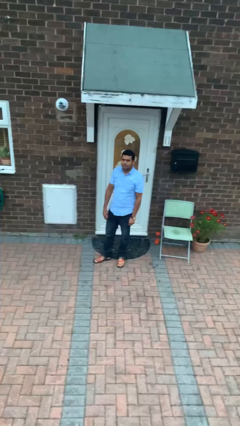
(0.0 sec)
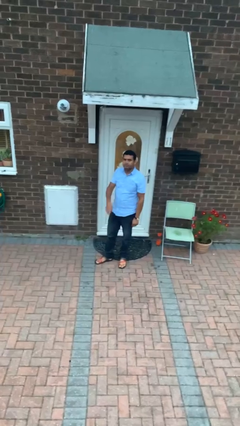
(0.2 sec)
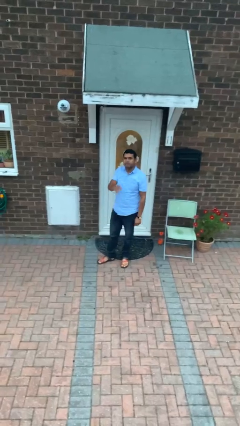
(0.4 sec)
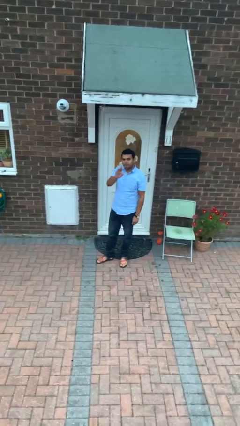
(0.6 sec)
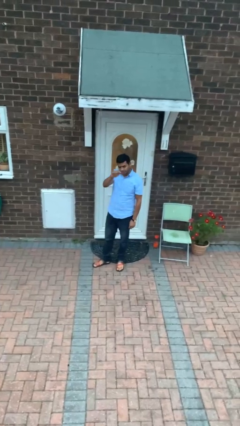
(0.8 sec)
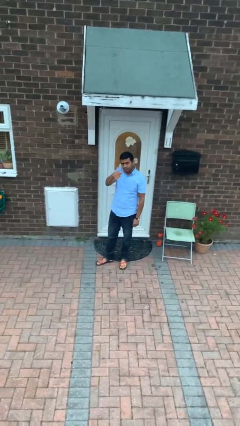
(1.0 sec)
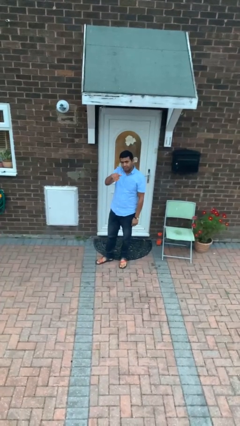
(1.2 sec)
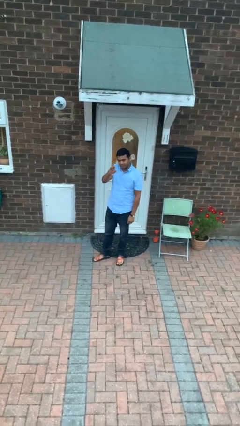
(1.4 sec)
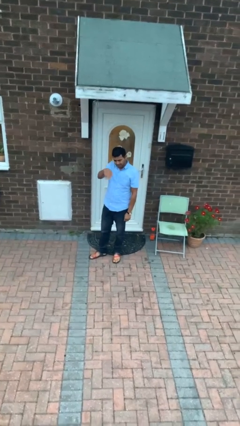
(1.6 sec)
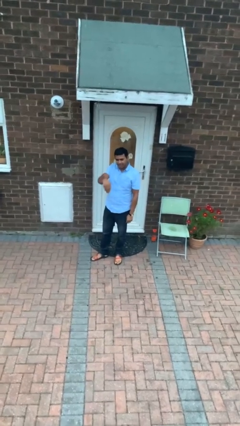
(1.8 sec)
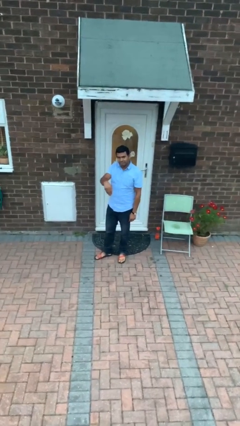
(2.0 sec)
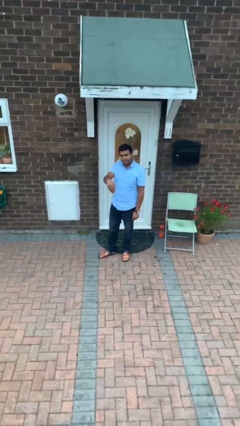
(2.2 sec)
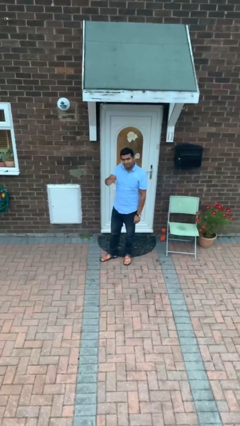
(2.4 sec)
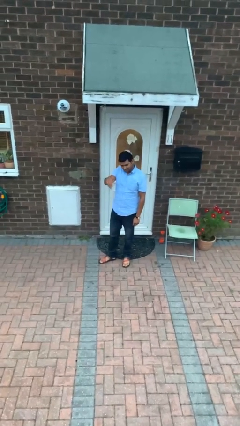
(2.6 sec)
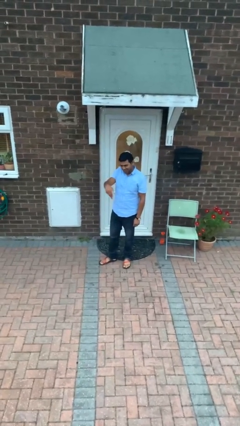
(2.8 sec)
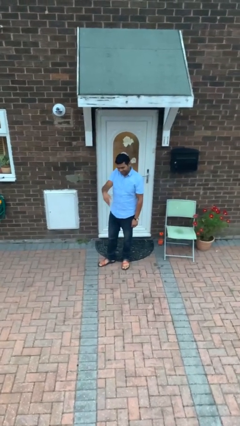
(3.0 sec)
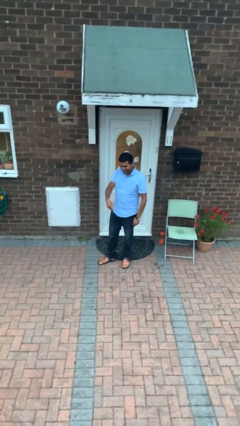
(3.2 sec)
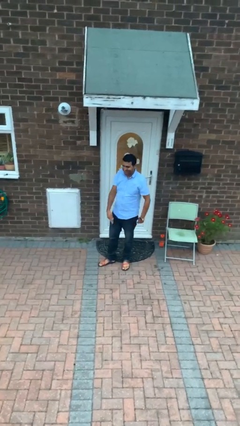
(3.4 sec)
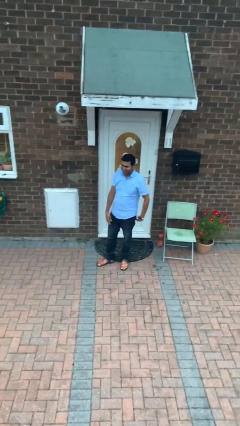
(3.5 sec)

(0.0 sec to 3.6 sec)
person gestures come here

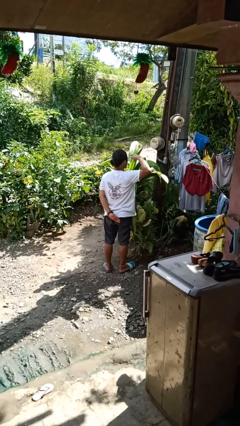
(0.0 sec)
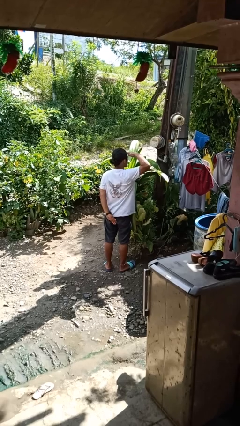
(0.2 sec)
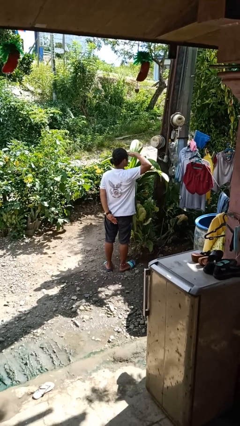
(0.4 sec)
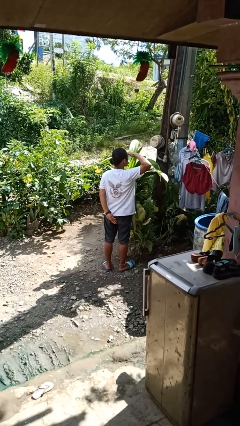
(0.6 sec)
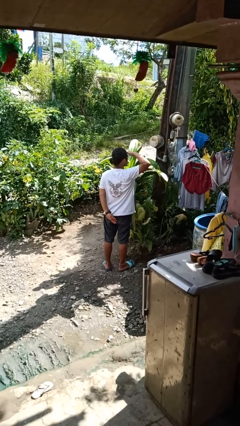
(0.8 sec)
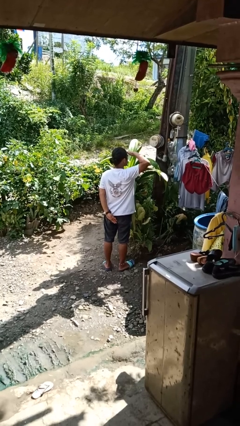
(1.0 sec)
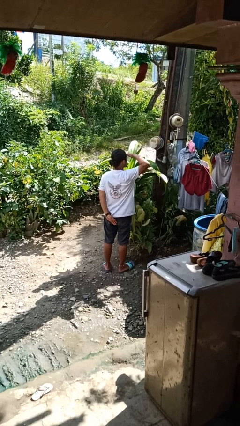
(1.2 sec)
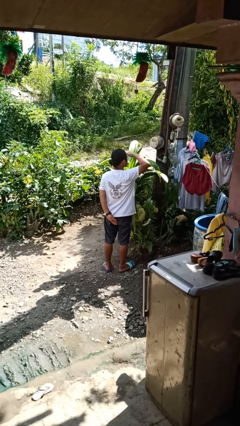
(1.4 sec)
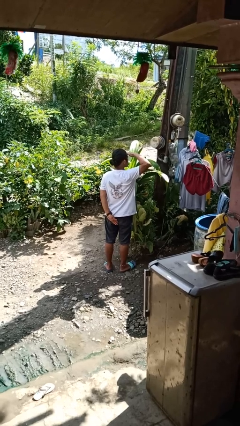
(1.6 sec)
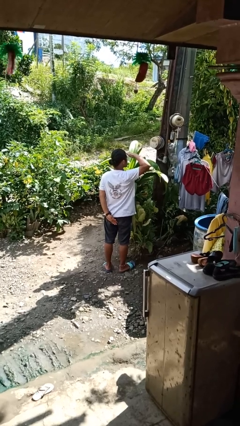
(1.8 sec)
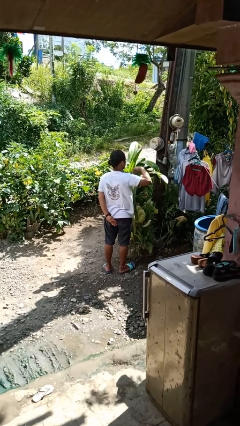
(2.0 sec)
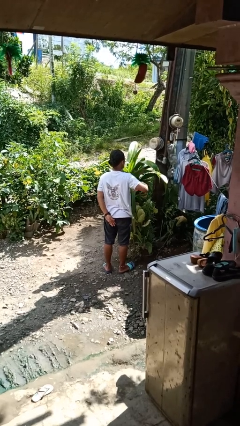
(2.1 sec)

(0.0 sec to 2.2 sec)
person shades eyes

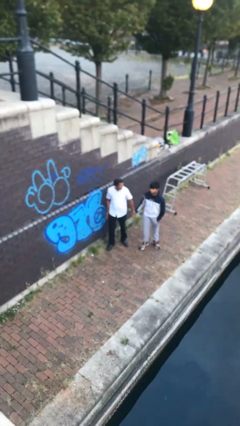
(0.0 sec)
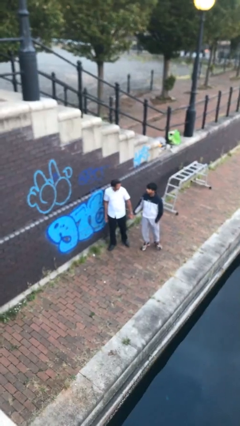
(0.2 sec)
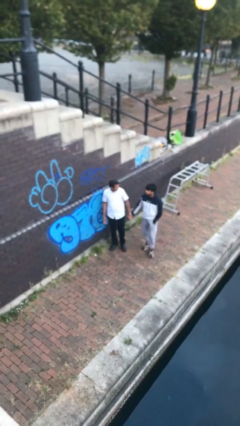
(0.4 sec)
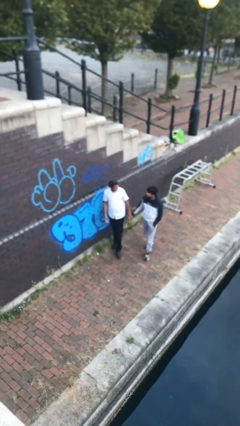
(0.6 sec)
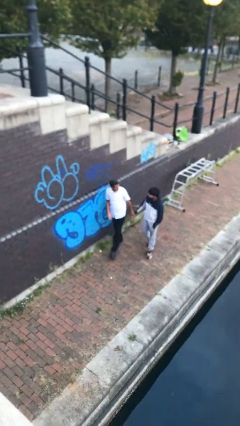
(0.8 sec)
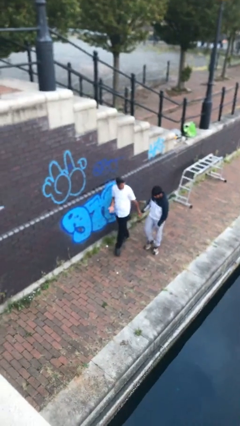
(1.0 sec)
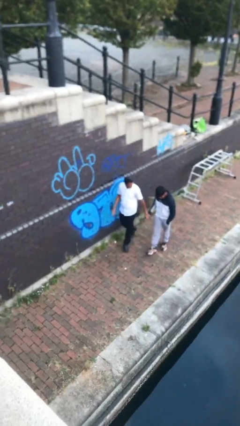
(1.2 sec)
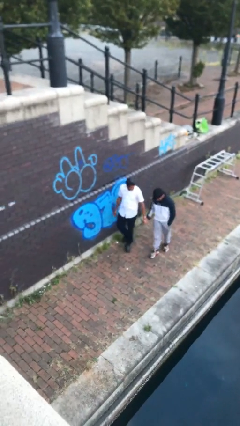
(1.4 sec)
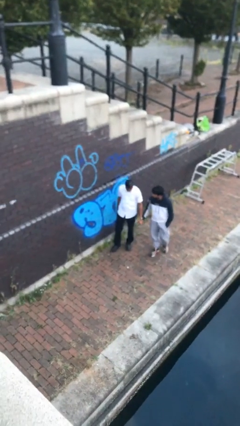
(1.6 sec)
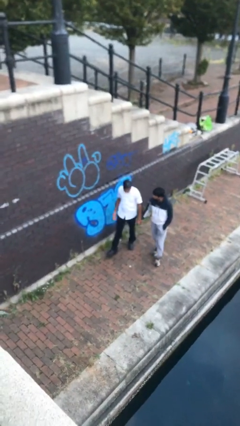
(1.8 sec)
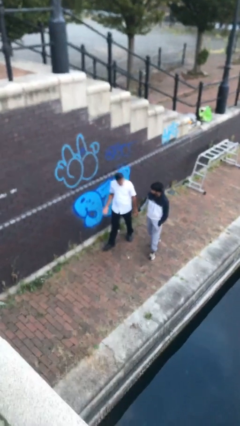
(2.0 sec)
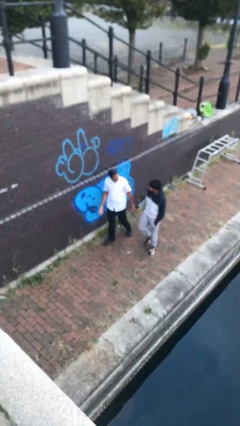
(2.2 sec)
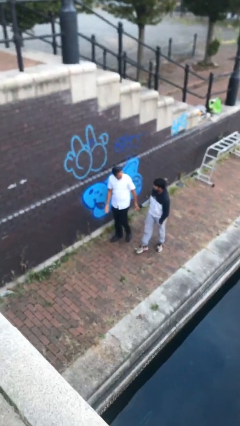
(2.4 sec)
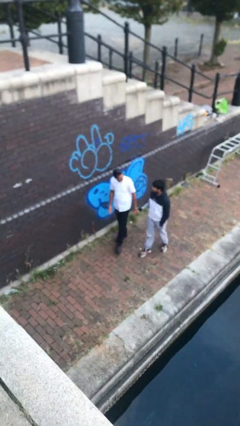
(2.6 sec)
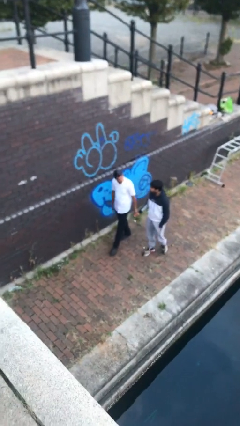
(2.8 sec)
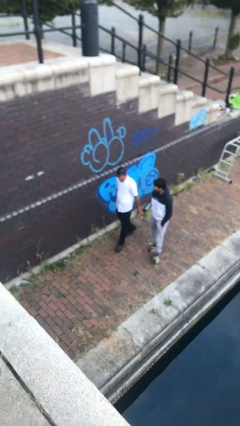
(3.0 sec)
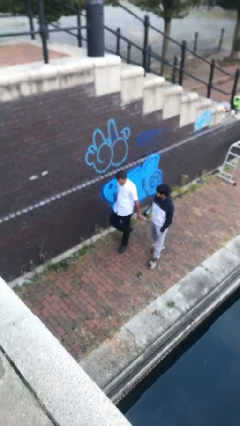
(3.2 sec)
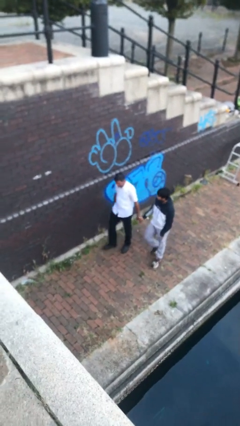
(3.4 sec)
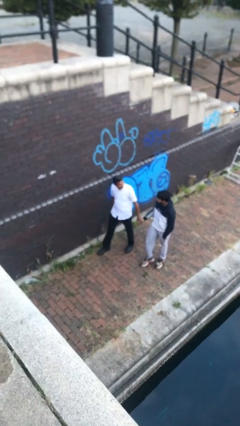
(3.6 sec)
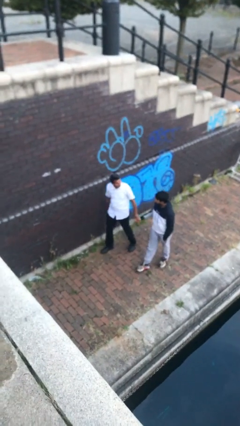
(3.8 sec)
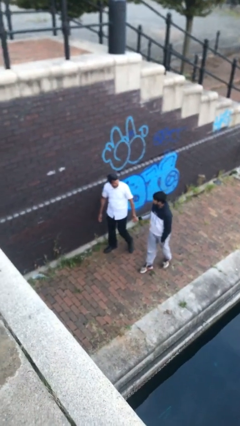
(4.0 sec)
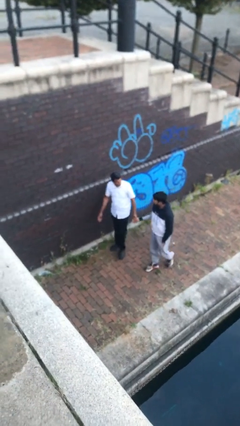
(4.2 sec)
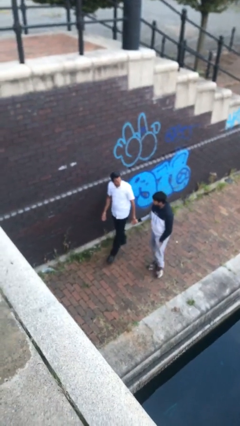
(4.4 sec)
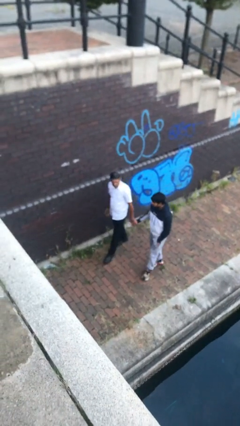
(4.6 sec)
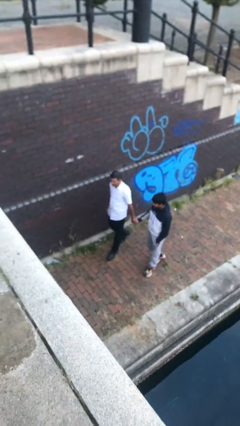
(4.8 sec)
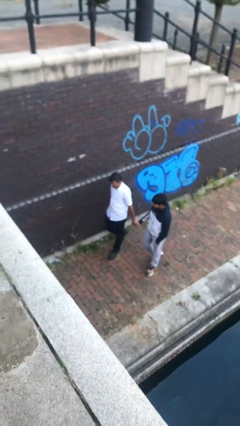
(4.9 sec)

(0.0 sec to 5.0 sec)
person holds hand

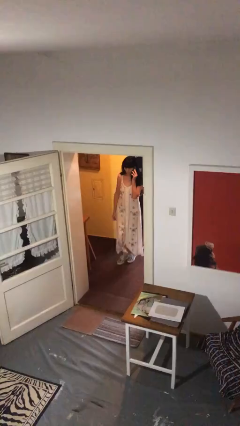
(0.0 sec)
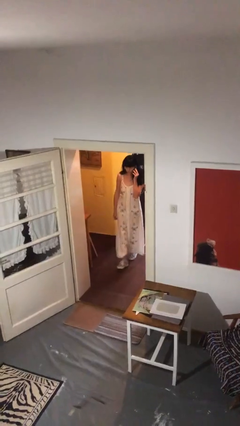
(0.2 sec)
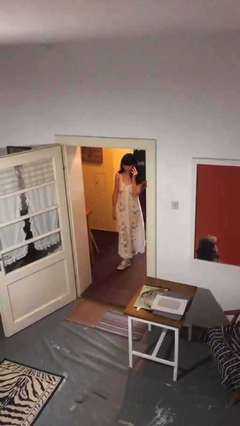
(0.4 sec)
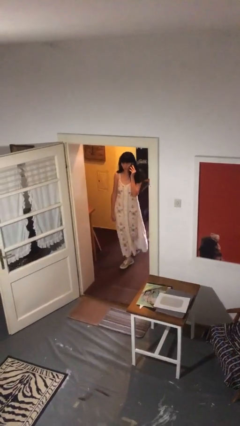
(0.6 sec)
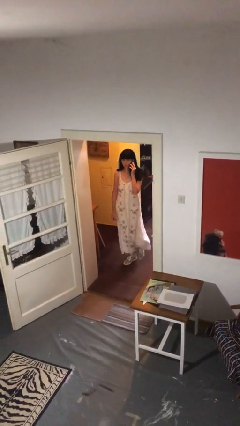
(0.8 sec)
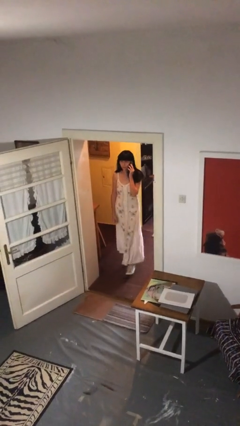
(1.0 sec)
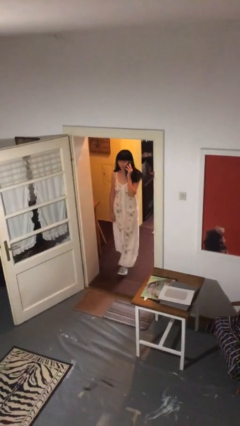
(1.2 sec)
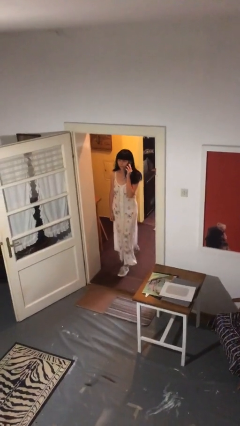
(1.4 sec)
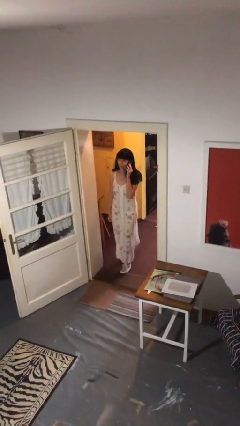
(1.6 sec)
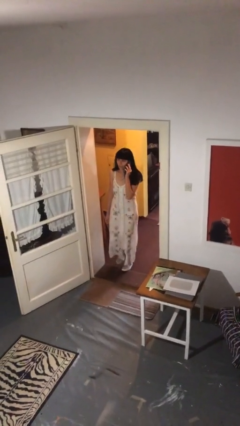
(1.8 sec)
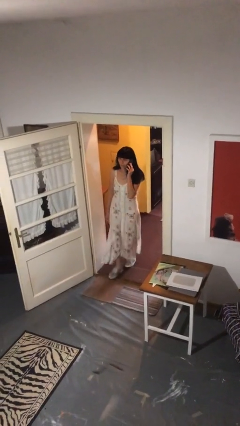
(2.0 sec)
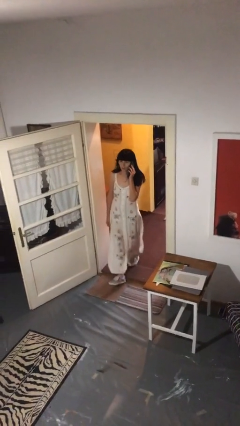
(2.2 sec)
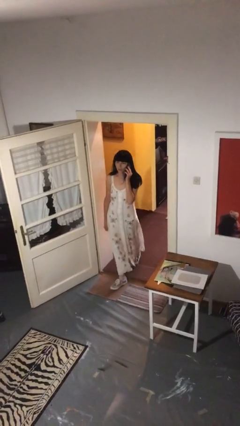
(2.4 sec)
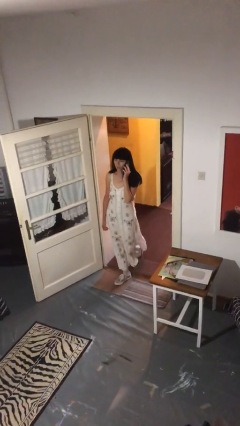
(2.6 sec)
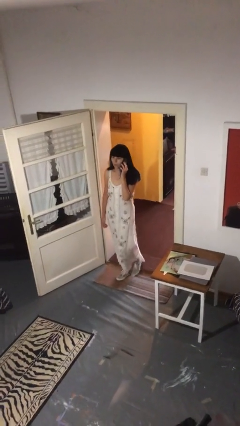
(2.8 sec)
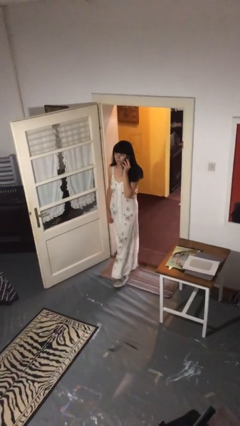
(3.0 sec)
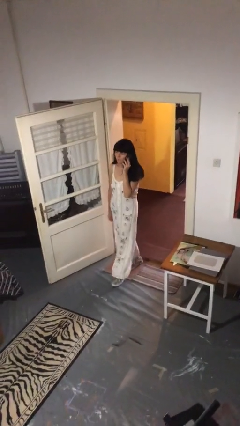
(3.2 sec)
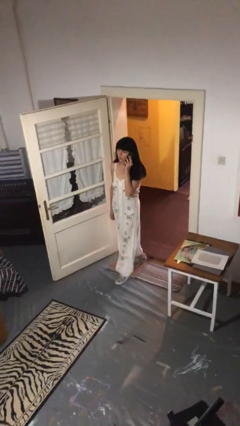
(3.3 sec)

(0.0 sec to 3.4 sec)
person enters scene through structure

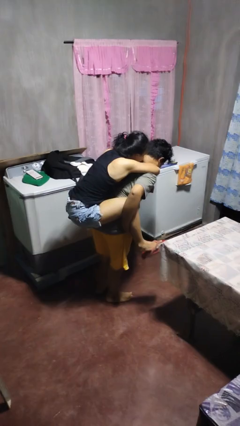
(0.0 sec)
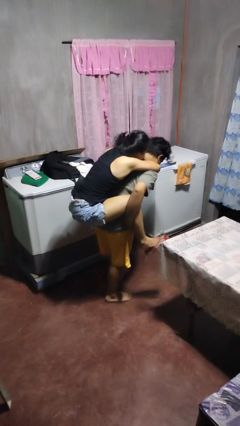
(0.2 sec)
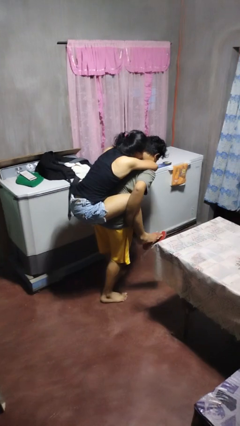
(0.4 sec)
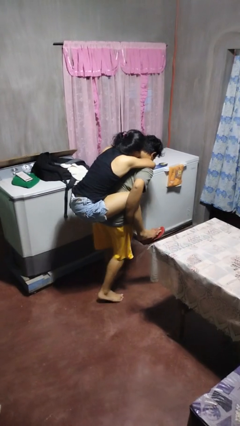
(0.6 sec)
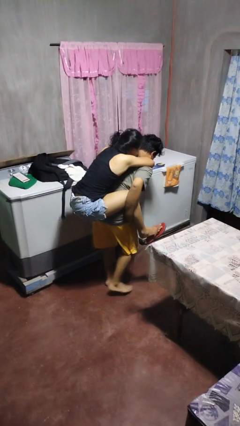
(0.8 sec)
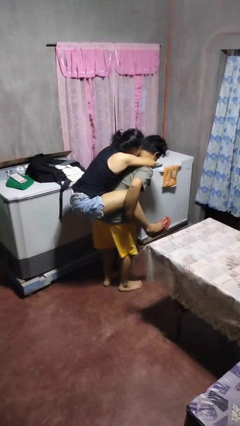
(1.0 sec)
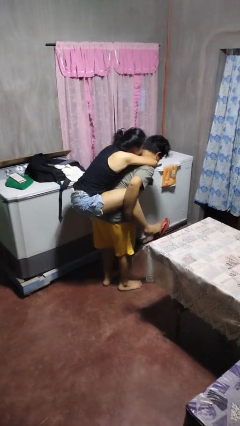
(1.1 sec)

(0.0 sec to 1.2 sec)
person carries person on back

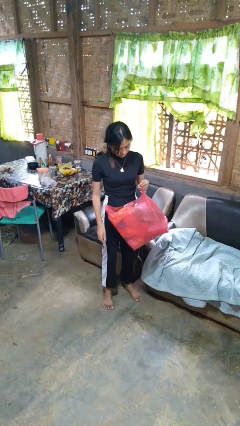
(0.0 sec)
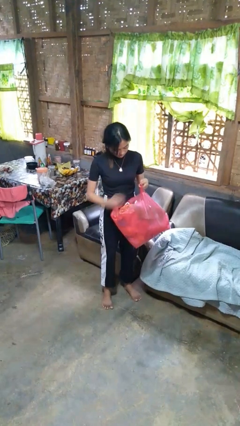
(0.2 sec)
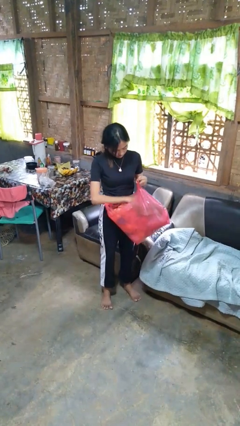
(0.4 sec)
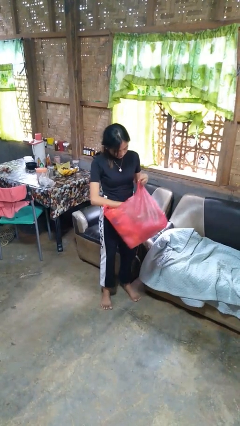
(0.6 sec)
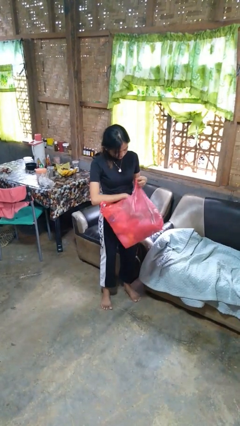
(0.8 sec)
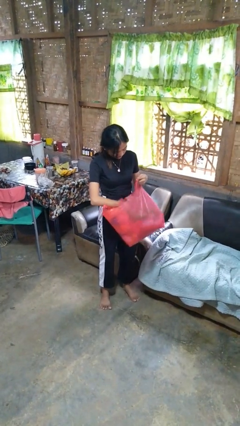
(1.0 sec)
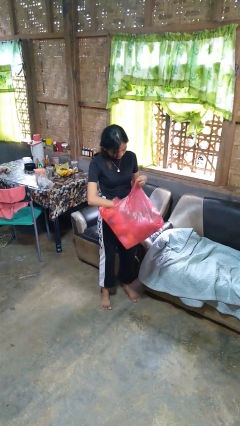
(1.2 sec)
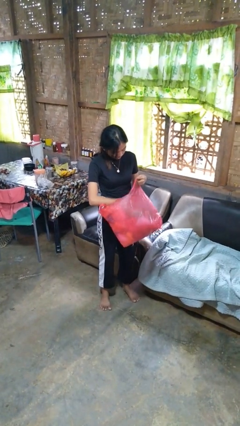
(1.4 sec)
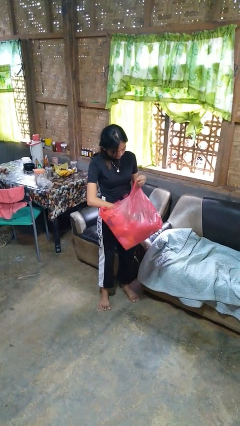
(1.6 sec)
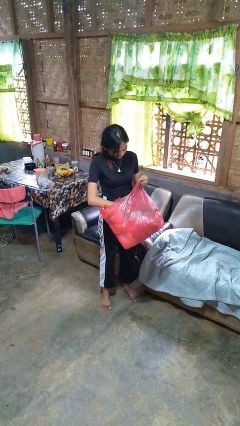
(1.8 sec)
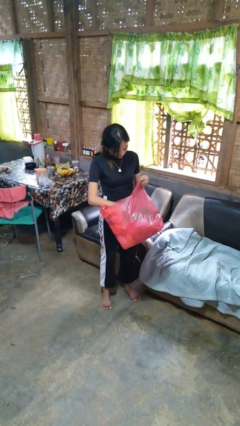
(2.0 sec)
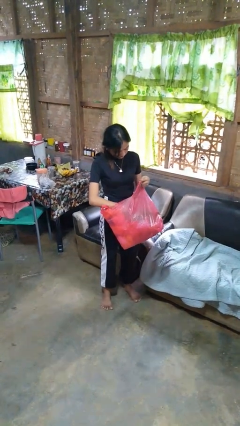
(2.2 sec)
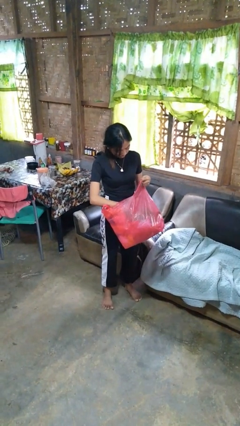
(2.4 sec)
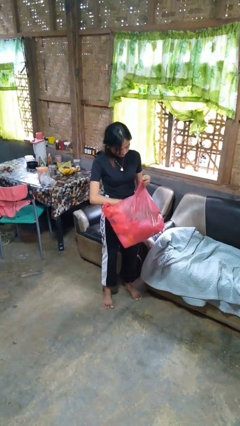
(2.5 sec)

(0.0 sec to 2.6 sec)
person searches in bag
